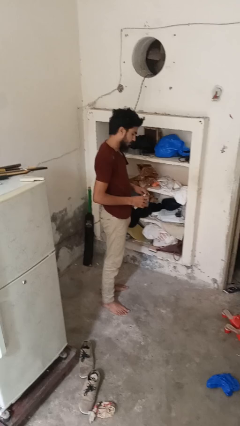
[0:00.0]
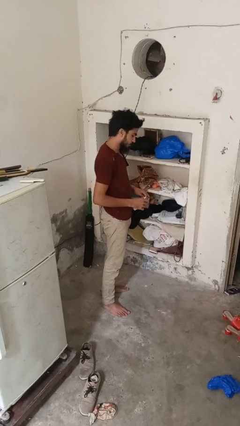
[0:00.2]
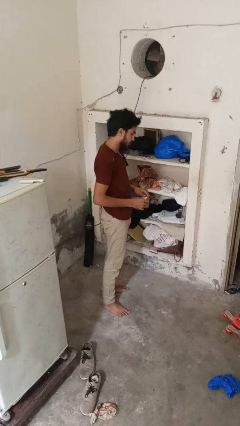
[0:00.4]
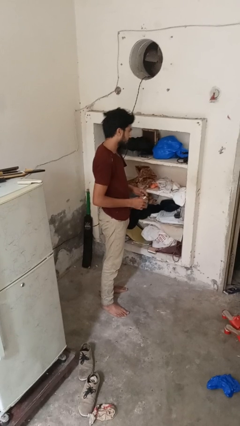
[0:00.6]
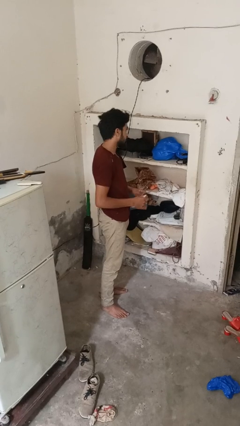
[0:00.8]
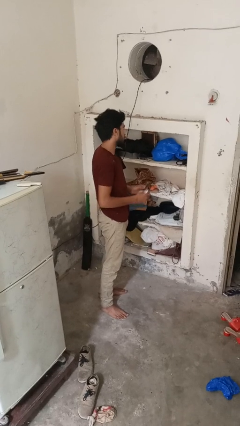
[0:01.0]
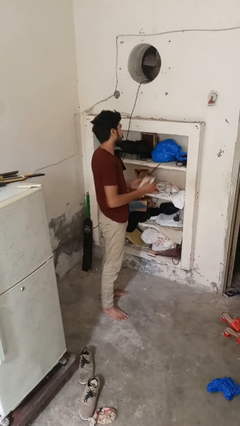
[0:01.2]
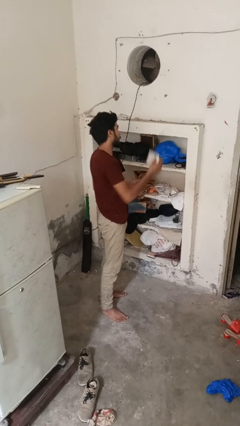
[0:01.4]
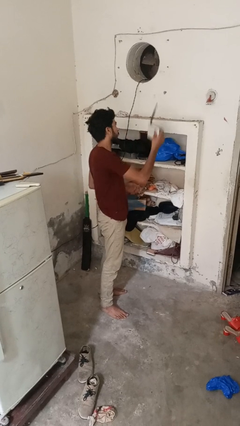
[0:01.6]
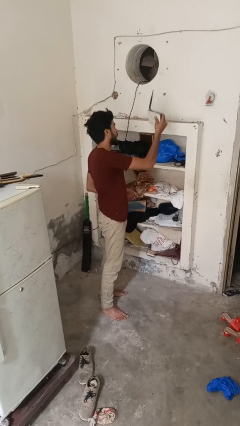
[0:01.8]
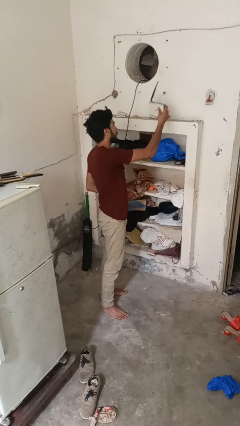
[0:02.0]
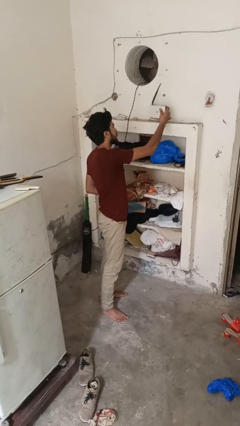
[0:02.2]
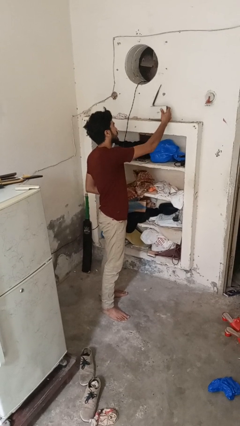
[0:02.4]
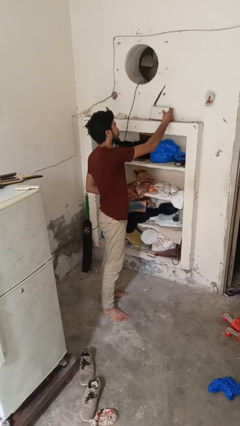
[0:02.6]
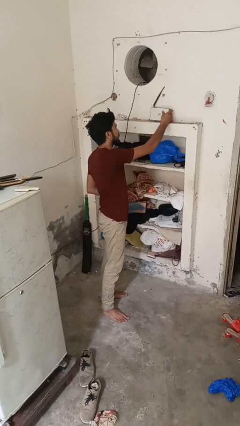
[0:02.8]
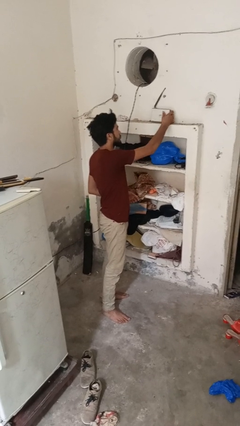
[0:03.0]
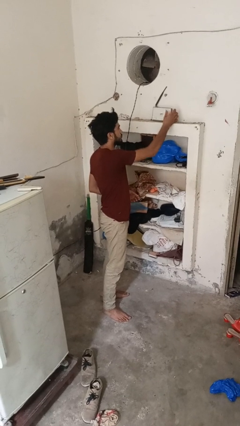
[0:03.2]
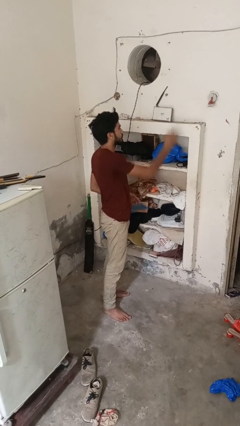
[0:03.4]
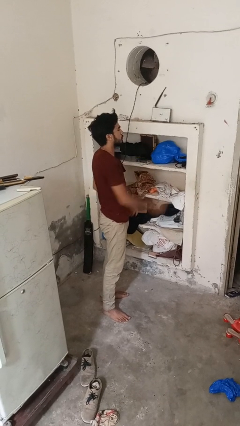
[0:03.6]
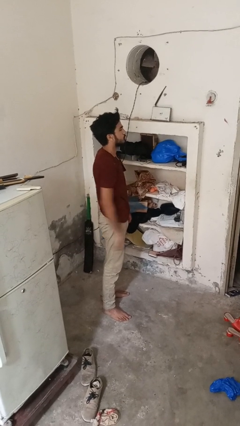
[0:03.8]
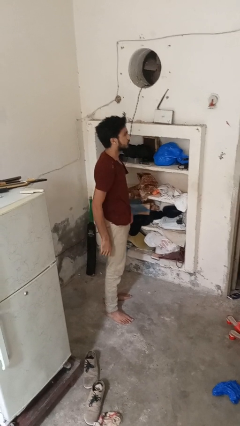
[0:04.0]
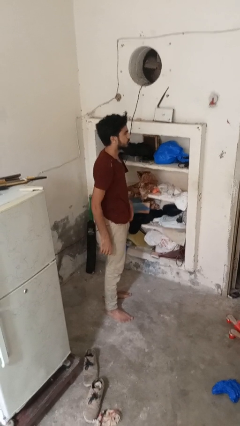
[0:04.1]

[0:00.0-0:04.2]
person puts down object on shelf

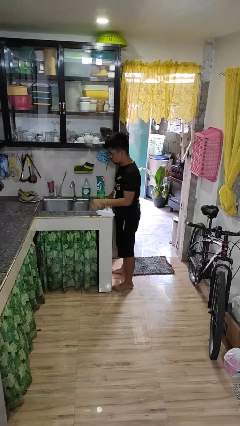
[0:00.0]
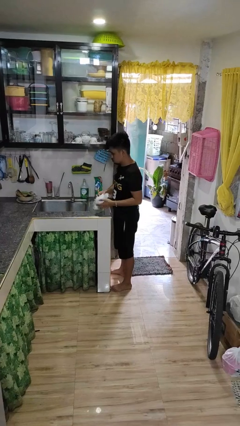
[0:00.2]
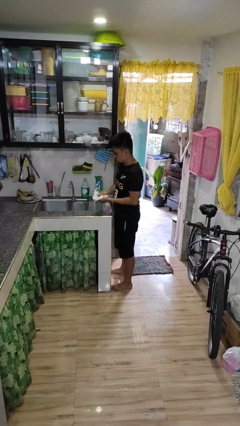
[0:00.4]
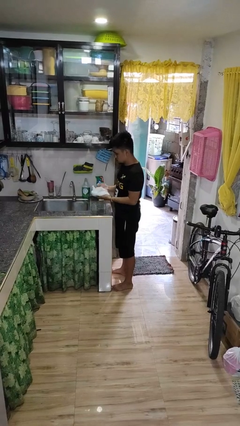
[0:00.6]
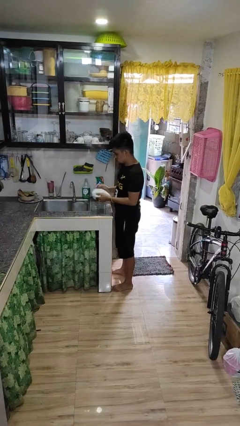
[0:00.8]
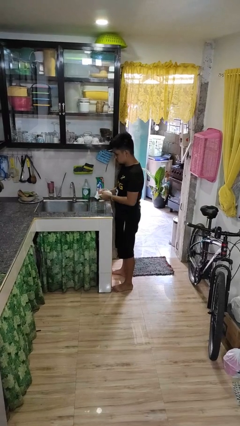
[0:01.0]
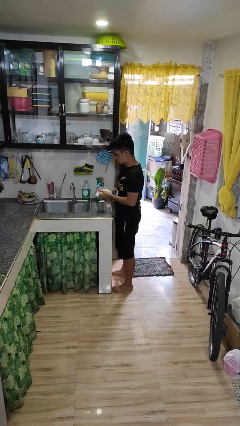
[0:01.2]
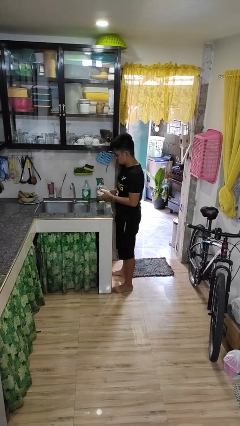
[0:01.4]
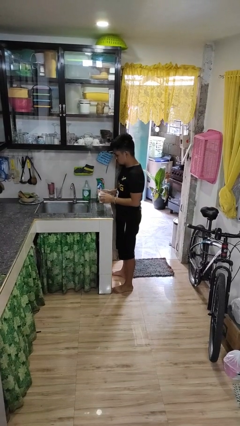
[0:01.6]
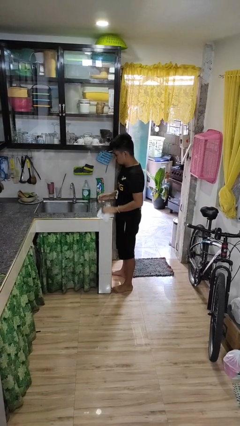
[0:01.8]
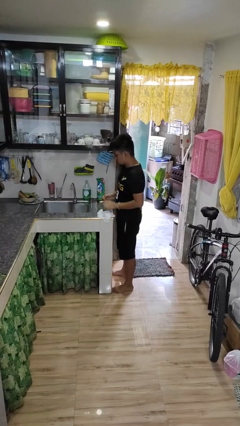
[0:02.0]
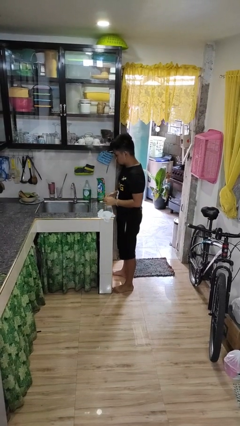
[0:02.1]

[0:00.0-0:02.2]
person dries hands with towel

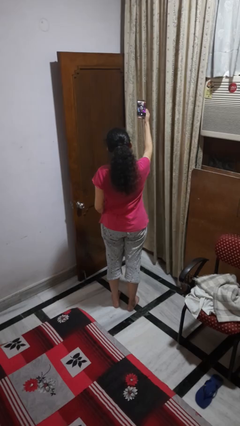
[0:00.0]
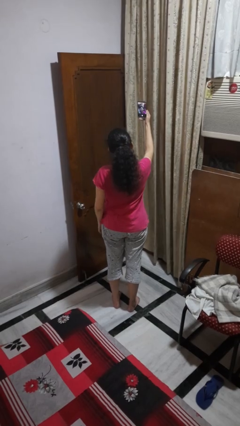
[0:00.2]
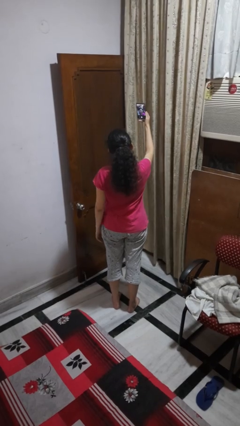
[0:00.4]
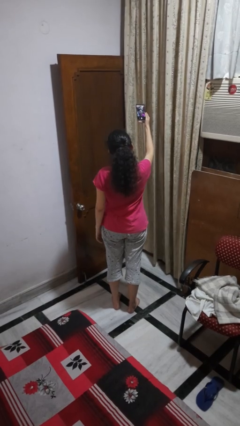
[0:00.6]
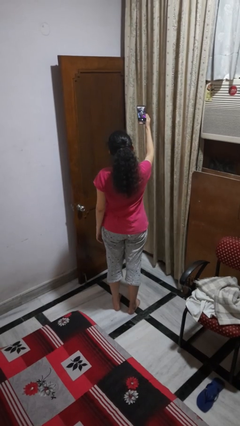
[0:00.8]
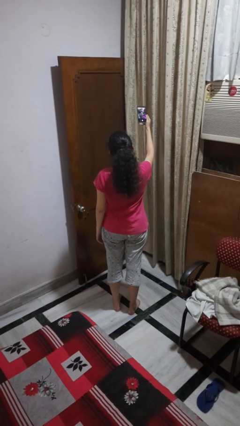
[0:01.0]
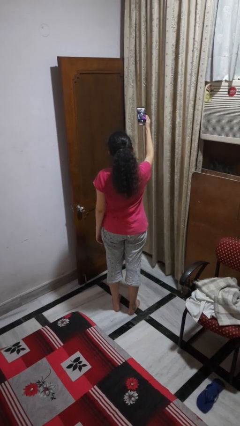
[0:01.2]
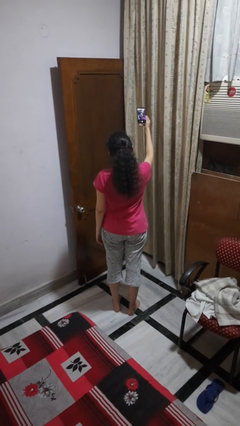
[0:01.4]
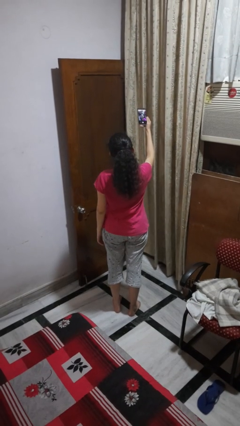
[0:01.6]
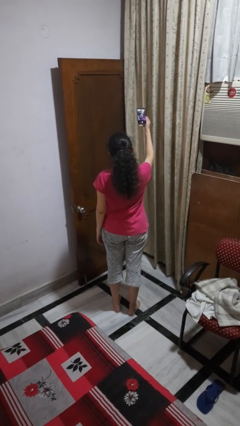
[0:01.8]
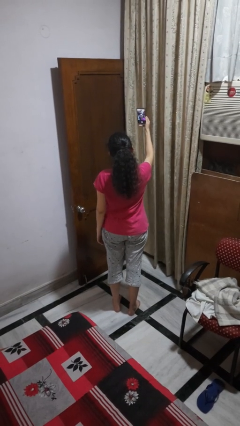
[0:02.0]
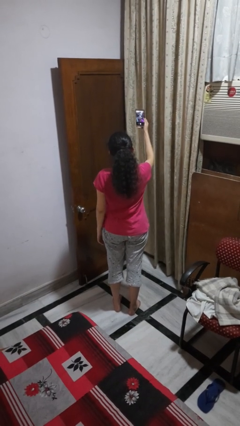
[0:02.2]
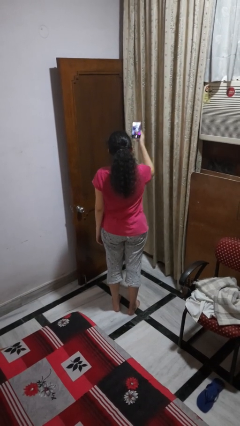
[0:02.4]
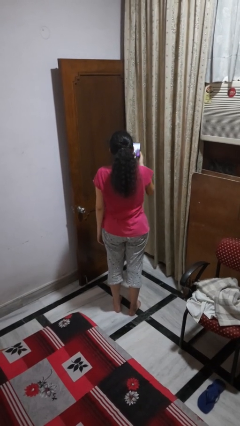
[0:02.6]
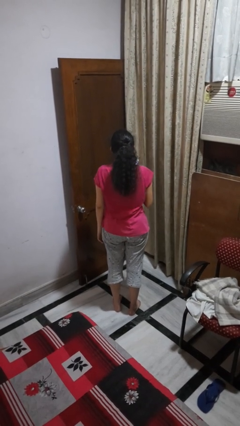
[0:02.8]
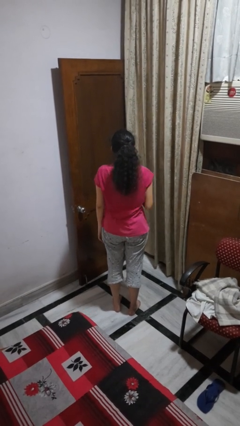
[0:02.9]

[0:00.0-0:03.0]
person takes selfie

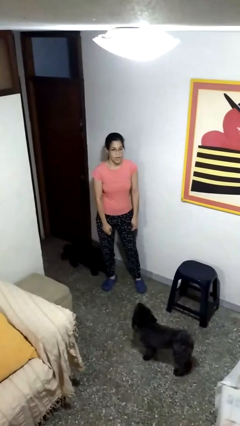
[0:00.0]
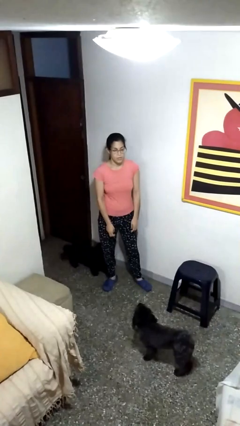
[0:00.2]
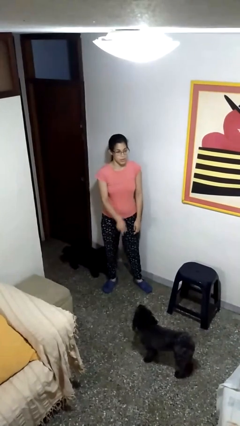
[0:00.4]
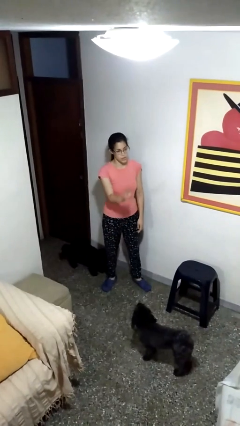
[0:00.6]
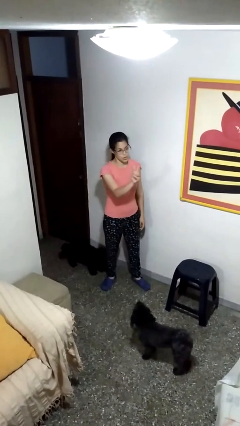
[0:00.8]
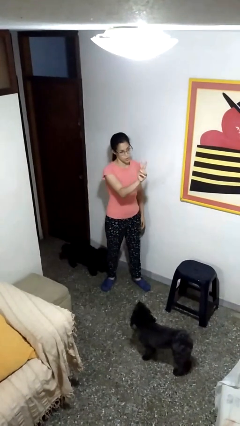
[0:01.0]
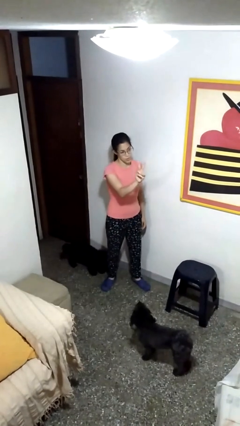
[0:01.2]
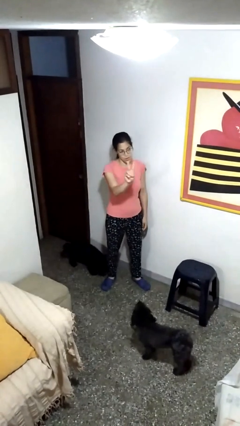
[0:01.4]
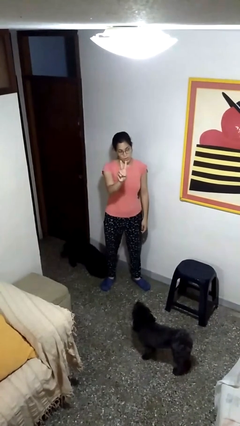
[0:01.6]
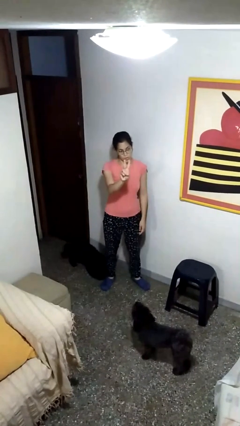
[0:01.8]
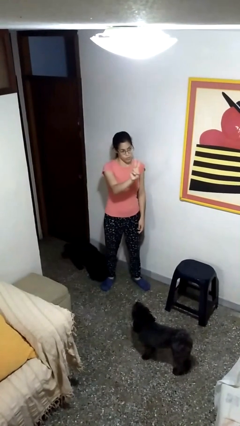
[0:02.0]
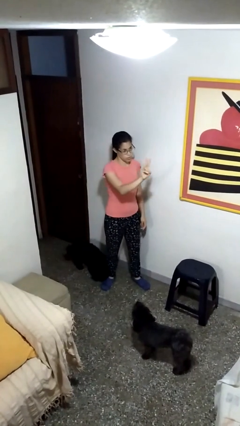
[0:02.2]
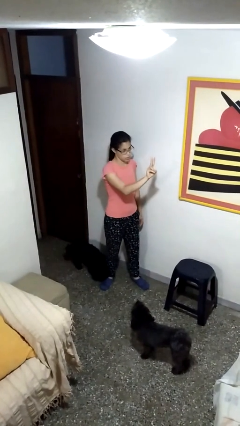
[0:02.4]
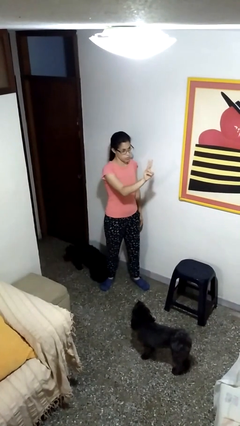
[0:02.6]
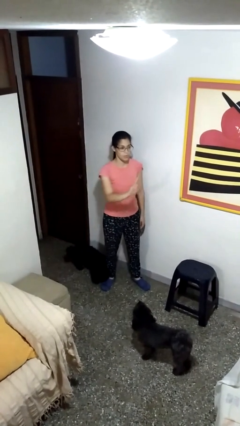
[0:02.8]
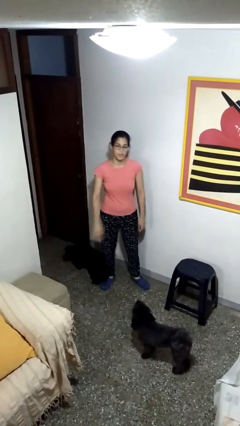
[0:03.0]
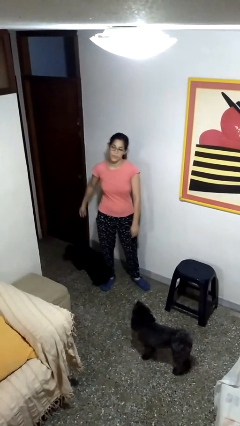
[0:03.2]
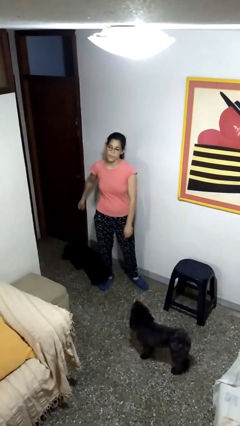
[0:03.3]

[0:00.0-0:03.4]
person gestures peace

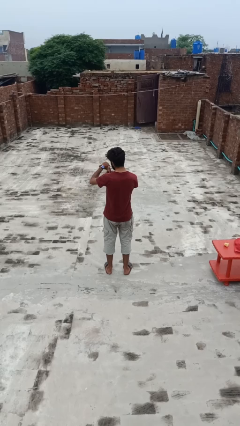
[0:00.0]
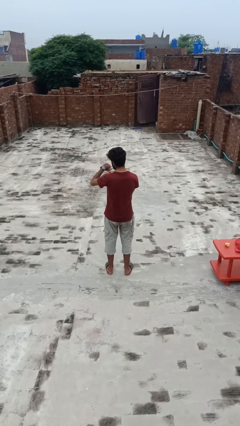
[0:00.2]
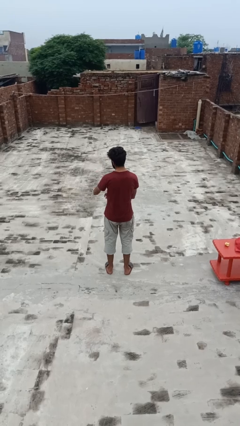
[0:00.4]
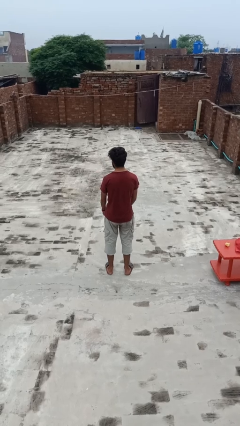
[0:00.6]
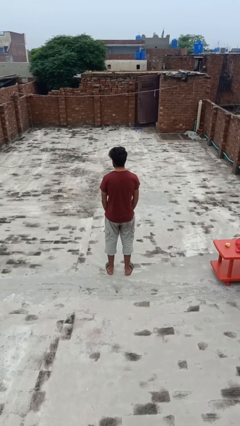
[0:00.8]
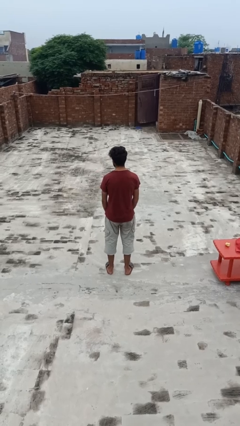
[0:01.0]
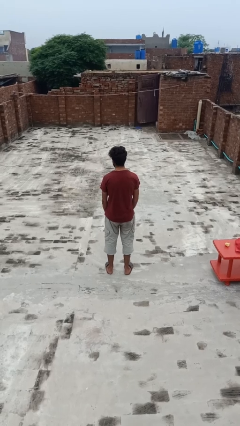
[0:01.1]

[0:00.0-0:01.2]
person gestures watch closely

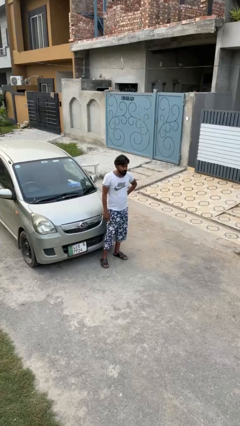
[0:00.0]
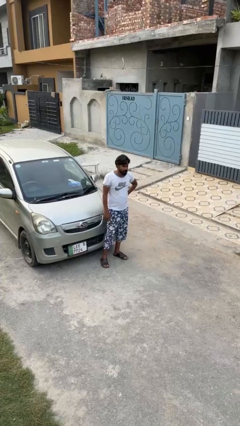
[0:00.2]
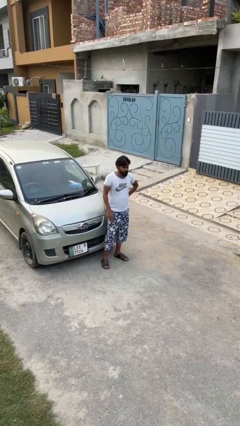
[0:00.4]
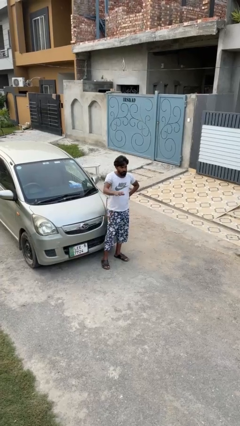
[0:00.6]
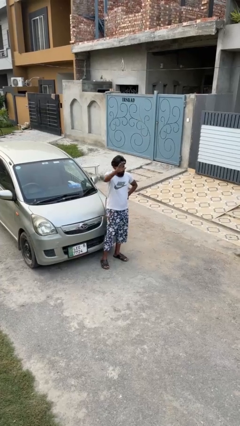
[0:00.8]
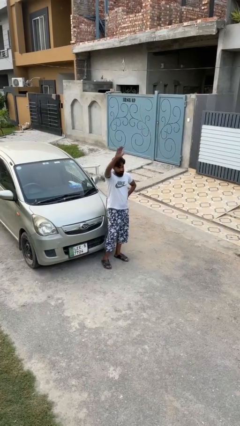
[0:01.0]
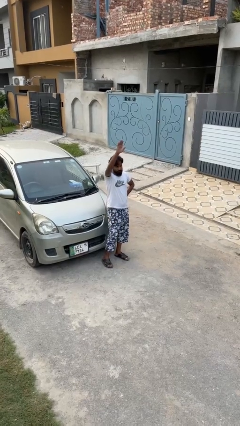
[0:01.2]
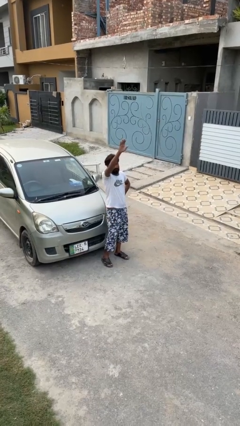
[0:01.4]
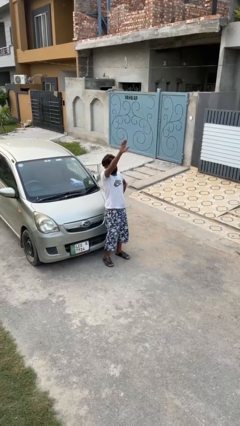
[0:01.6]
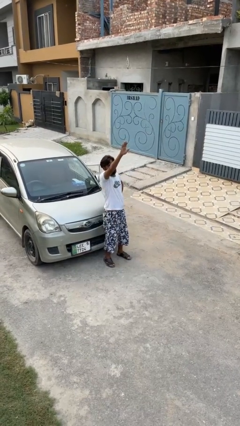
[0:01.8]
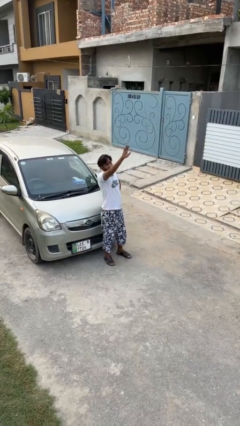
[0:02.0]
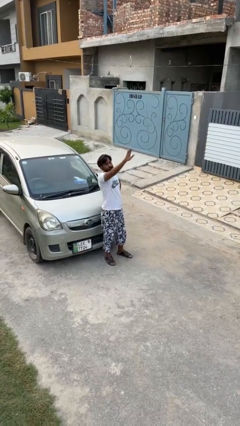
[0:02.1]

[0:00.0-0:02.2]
person gestures raise hand

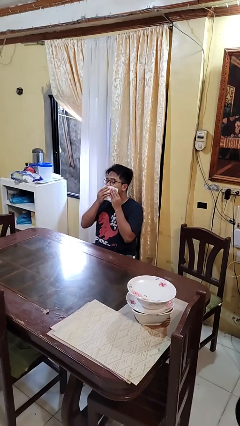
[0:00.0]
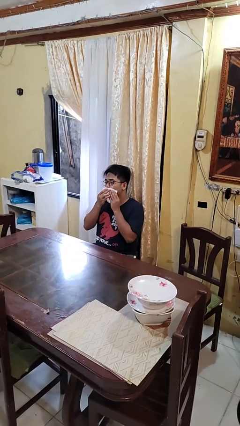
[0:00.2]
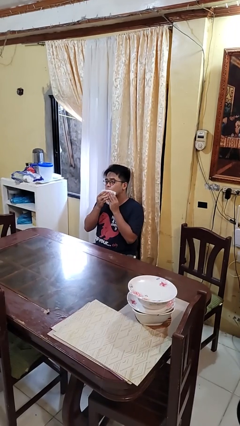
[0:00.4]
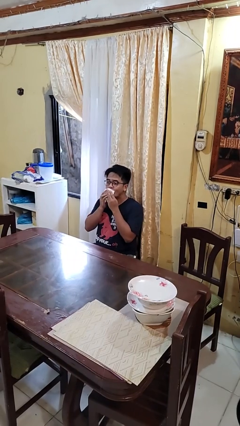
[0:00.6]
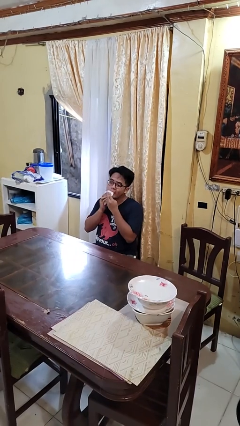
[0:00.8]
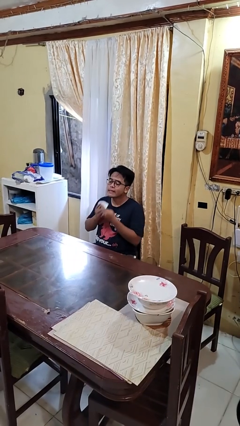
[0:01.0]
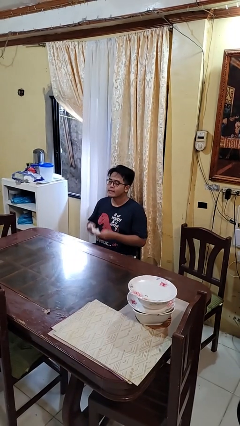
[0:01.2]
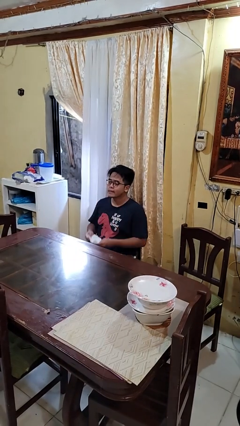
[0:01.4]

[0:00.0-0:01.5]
person wipes mouth with napkin
